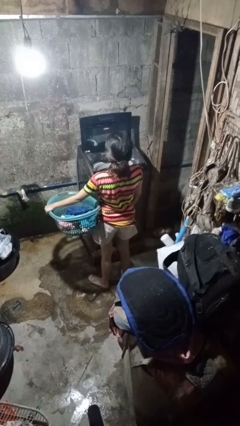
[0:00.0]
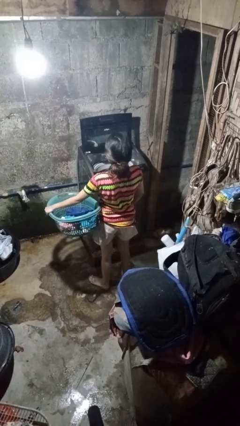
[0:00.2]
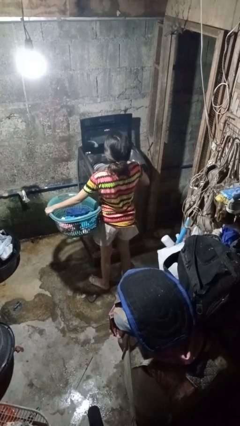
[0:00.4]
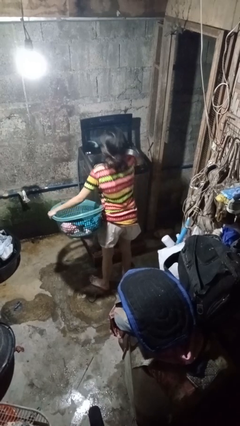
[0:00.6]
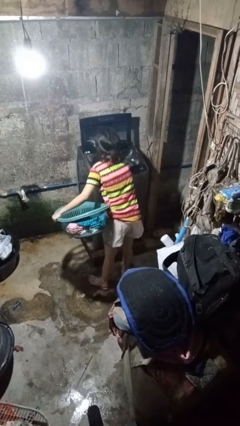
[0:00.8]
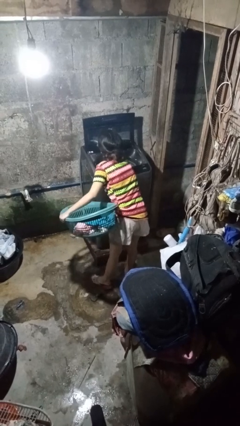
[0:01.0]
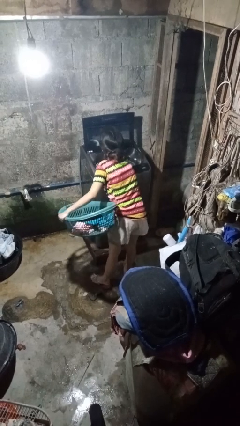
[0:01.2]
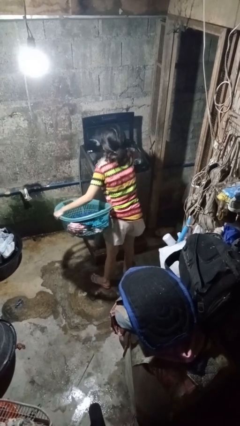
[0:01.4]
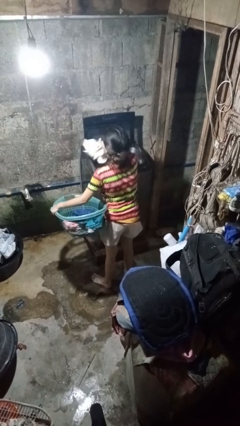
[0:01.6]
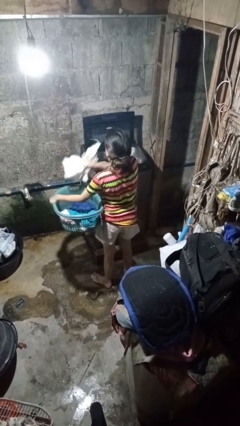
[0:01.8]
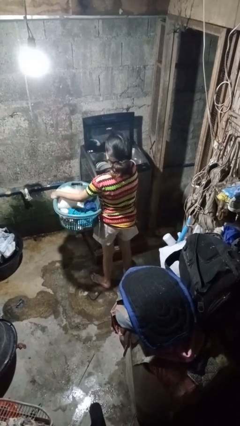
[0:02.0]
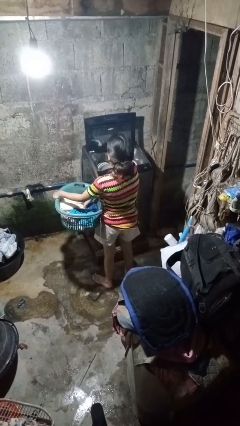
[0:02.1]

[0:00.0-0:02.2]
person unloads clotheswasher

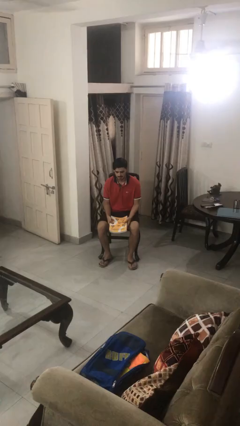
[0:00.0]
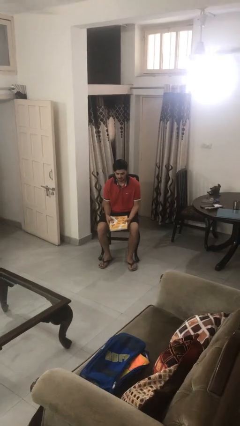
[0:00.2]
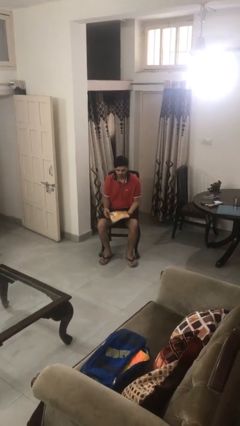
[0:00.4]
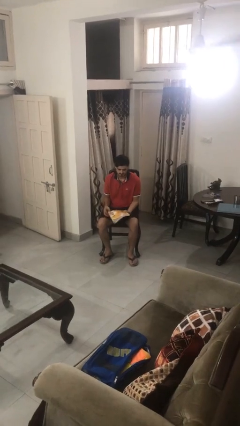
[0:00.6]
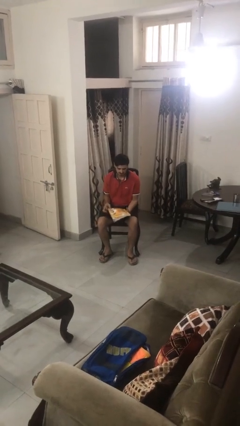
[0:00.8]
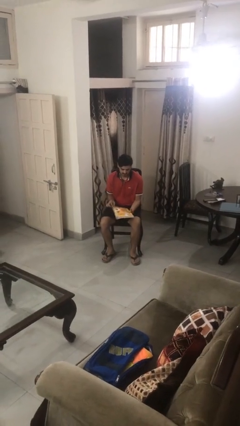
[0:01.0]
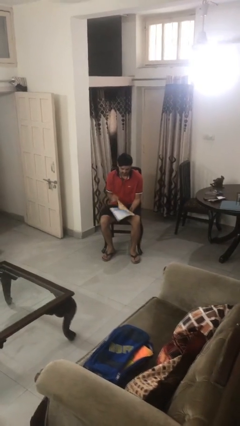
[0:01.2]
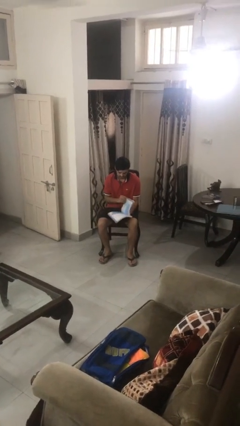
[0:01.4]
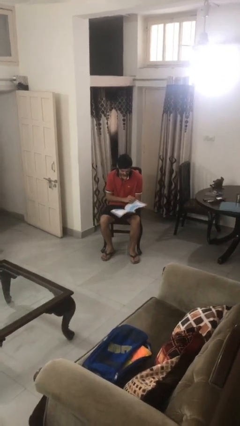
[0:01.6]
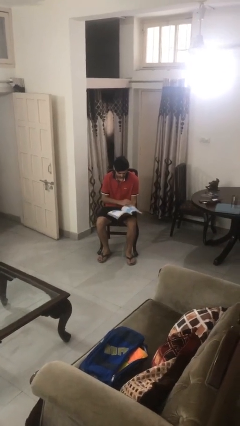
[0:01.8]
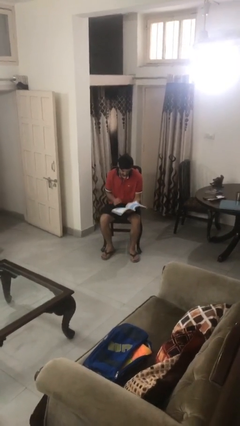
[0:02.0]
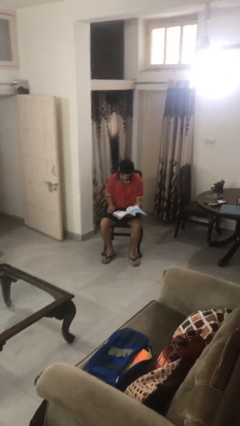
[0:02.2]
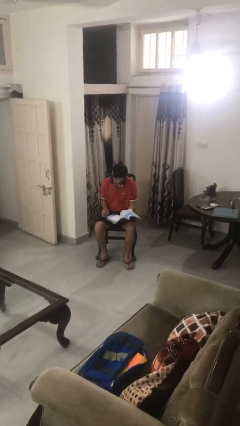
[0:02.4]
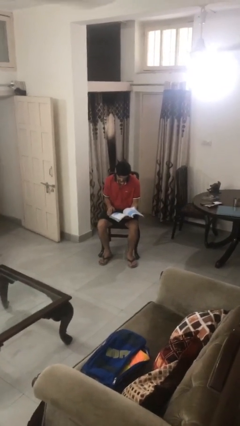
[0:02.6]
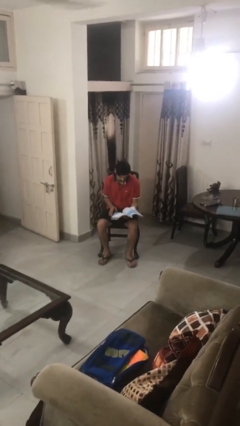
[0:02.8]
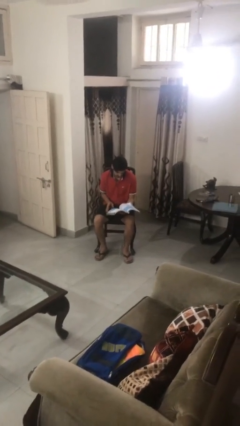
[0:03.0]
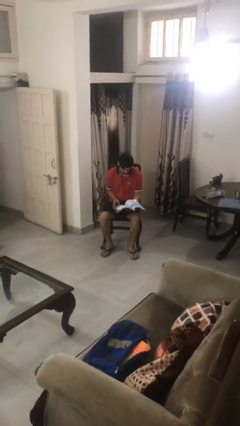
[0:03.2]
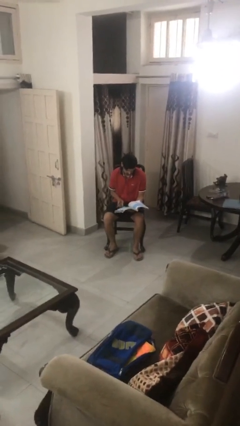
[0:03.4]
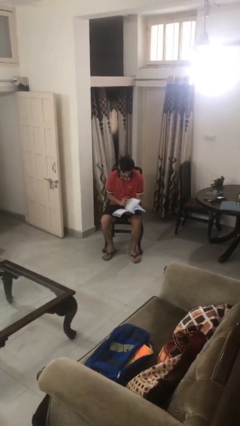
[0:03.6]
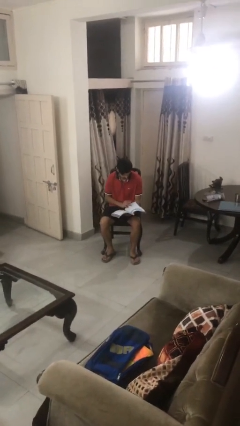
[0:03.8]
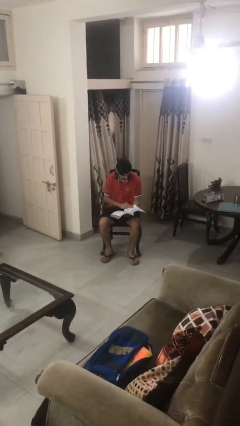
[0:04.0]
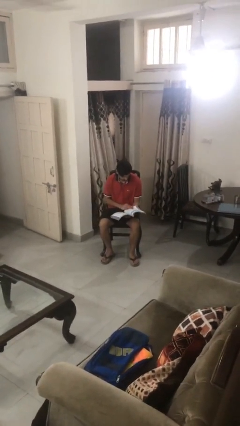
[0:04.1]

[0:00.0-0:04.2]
person reads book

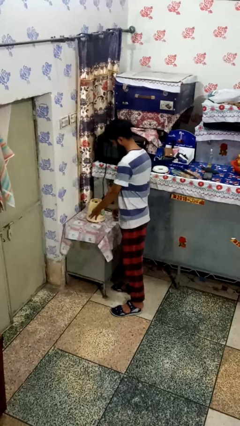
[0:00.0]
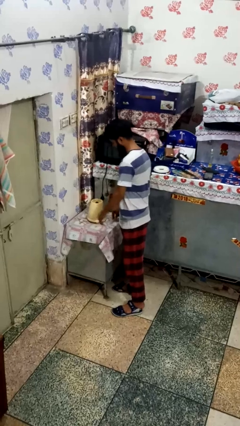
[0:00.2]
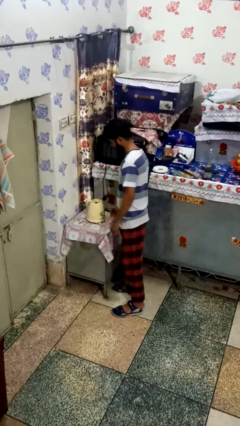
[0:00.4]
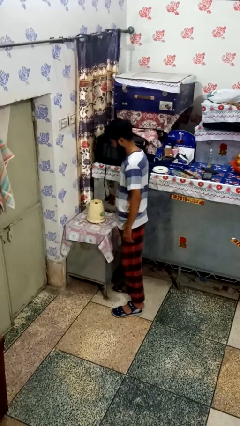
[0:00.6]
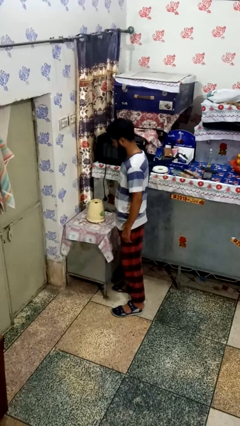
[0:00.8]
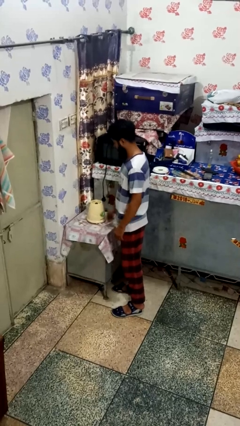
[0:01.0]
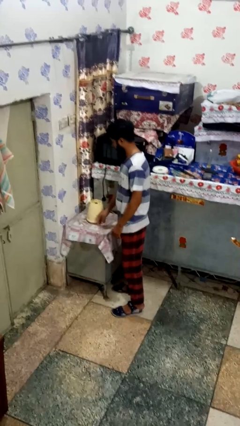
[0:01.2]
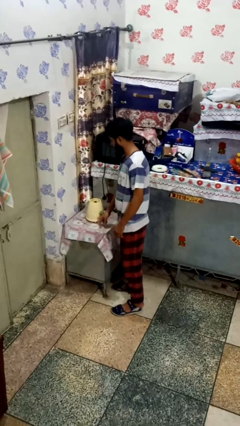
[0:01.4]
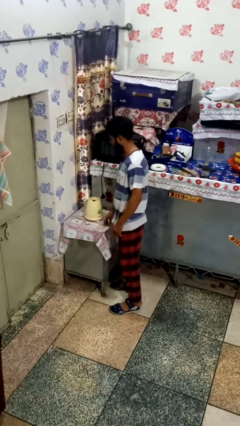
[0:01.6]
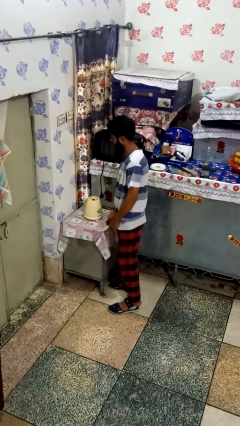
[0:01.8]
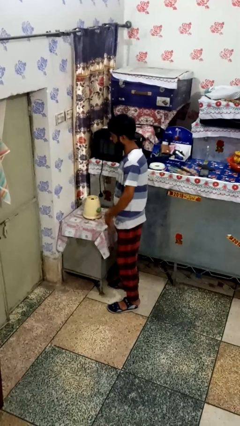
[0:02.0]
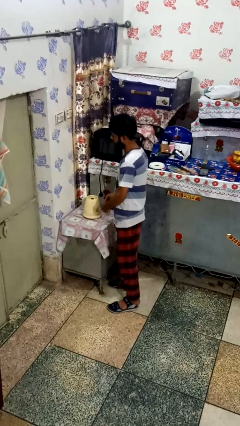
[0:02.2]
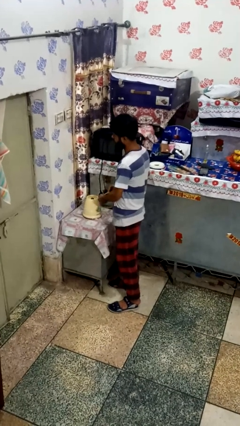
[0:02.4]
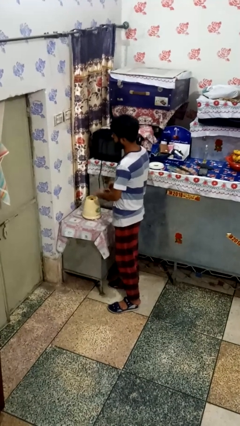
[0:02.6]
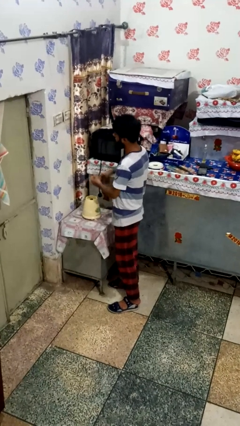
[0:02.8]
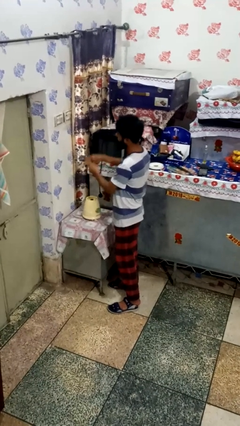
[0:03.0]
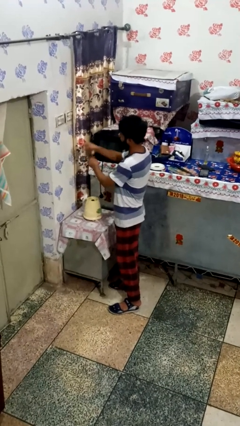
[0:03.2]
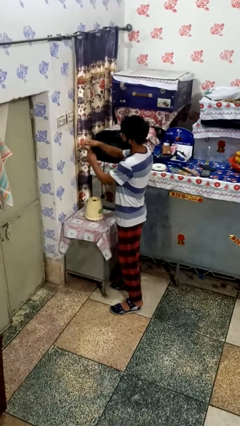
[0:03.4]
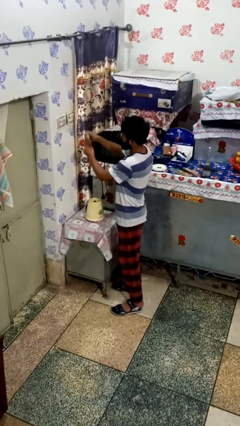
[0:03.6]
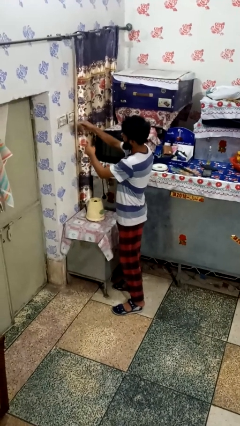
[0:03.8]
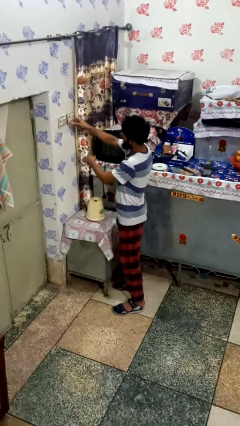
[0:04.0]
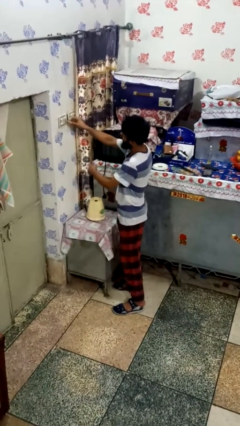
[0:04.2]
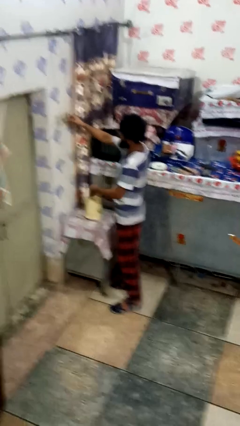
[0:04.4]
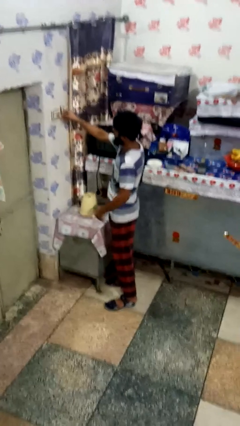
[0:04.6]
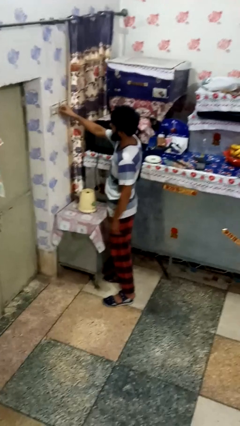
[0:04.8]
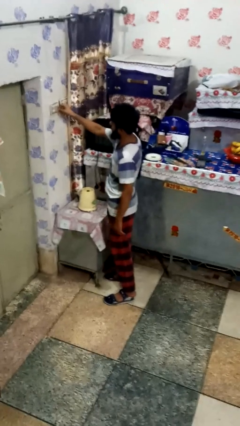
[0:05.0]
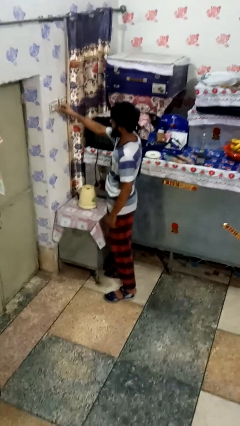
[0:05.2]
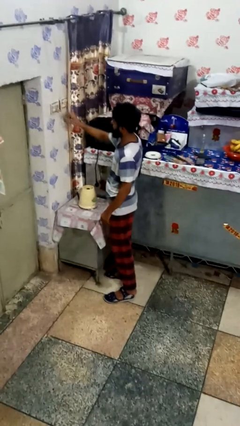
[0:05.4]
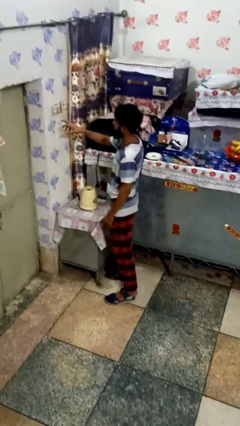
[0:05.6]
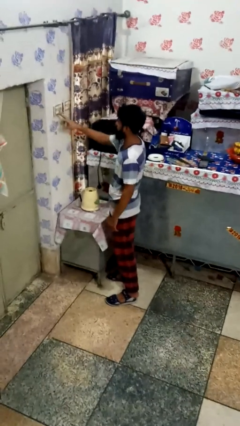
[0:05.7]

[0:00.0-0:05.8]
person plugs into electrical socket

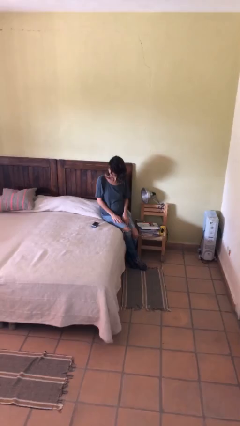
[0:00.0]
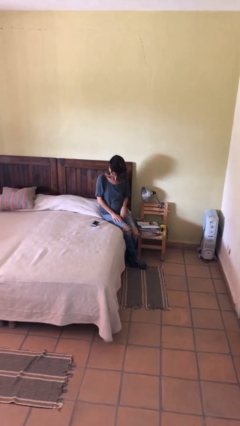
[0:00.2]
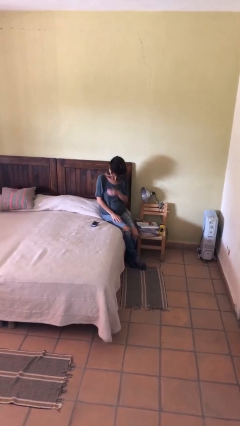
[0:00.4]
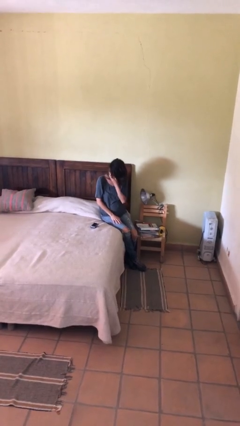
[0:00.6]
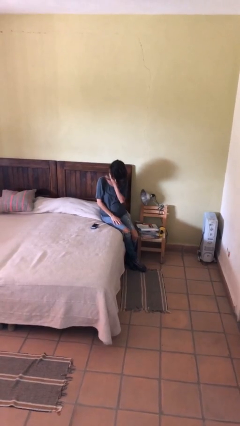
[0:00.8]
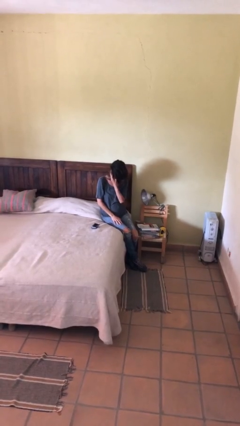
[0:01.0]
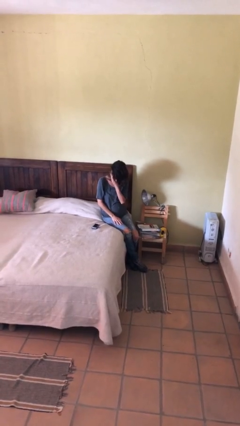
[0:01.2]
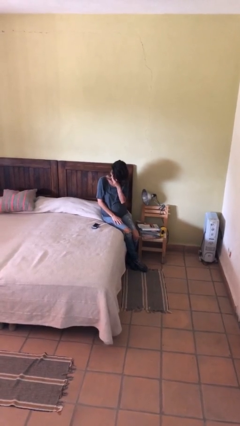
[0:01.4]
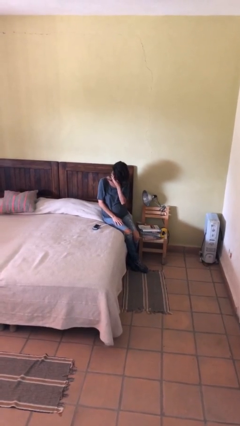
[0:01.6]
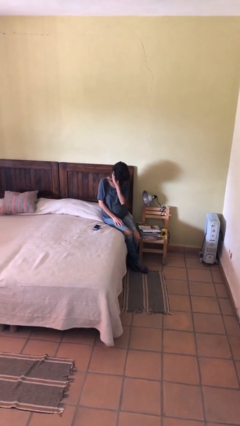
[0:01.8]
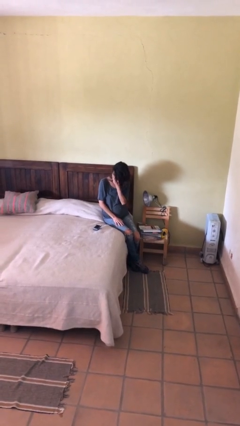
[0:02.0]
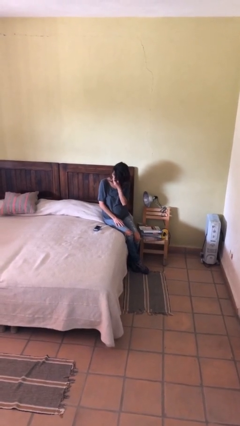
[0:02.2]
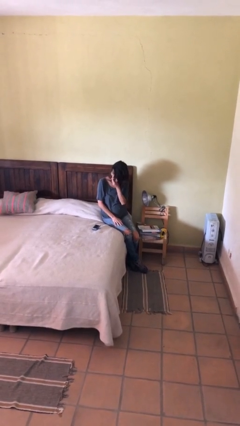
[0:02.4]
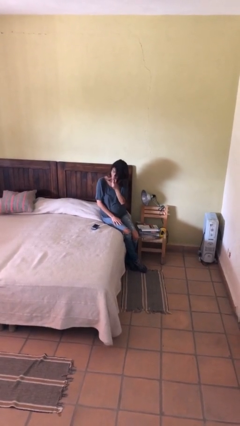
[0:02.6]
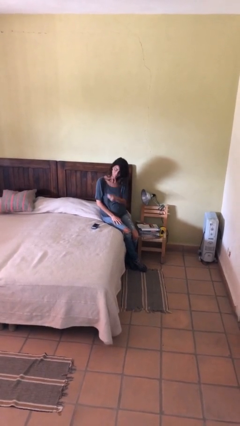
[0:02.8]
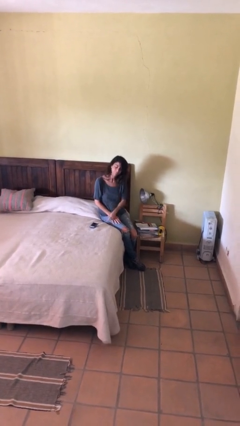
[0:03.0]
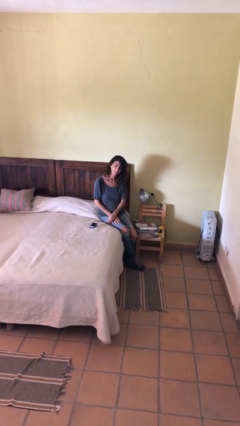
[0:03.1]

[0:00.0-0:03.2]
person strokes chin

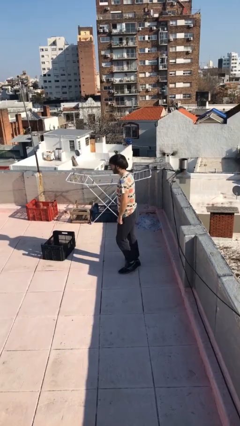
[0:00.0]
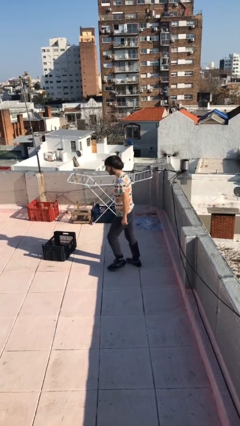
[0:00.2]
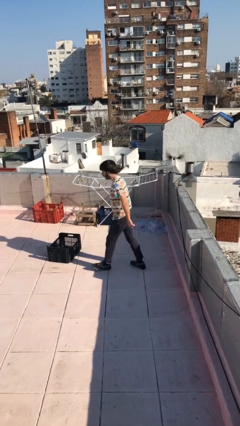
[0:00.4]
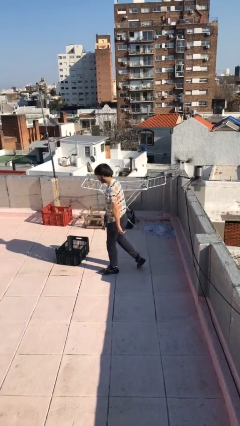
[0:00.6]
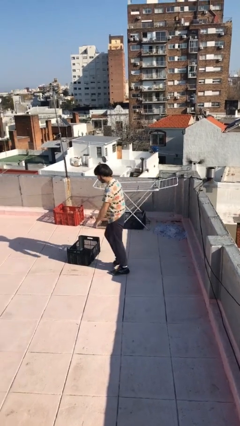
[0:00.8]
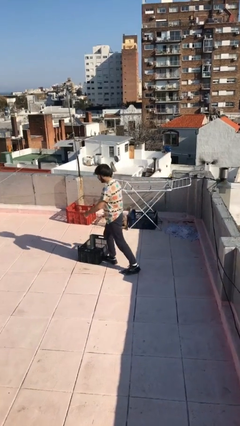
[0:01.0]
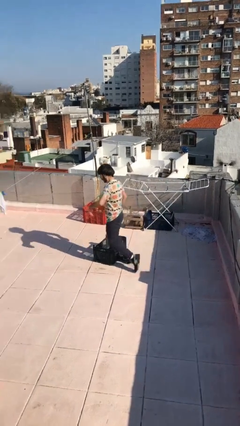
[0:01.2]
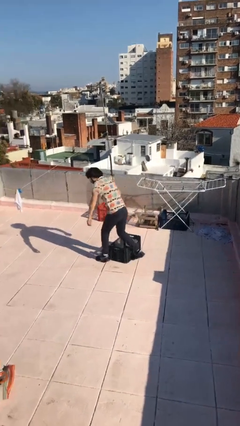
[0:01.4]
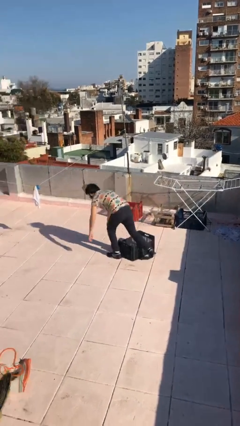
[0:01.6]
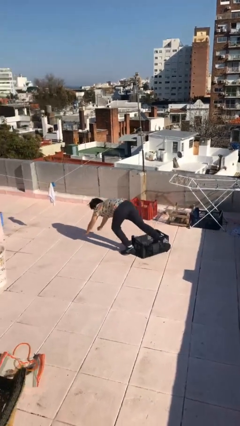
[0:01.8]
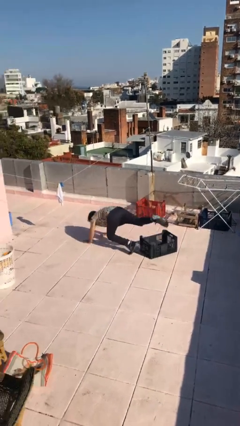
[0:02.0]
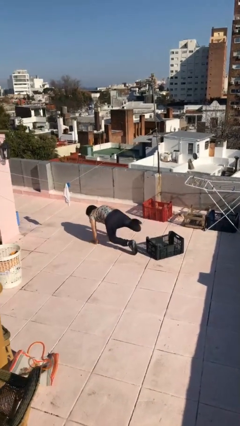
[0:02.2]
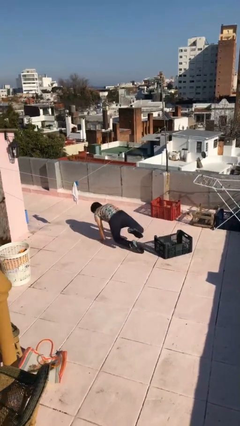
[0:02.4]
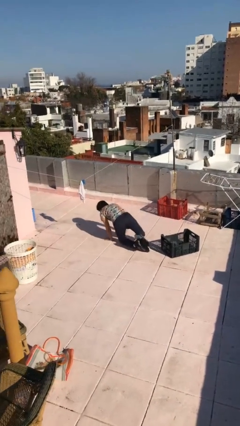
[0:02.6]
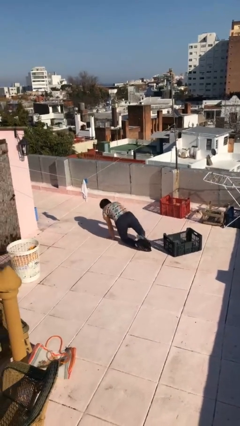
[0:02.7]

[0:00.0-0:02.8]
person trips on object on floor
